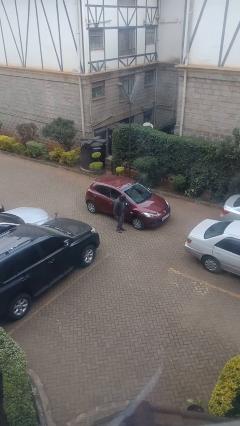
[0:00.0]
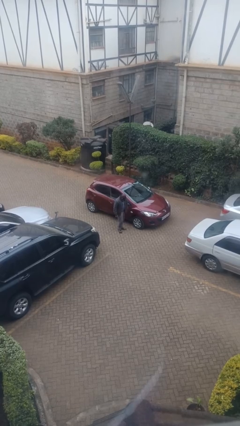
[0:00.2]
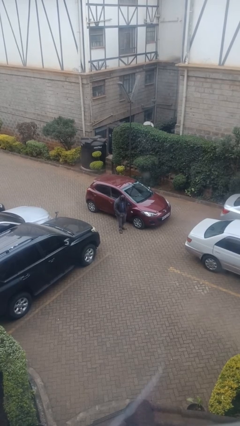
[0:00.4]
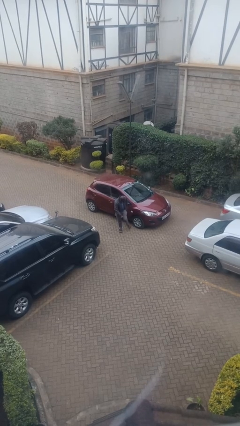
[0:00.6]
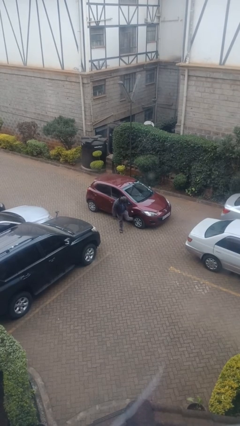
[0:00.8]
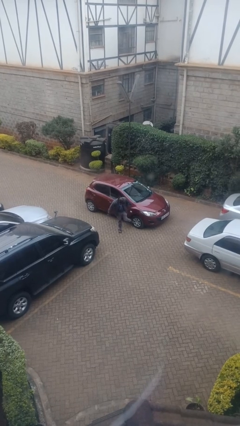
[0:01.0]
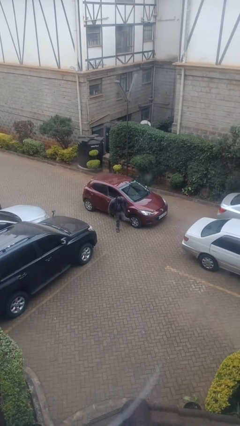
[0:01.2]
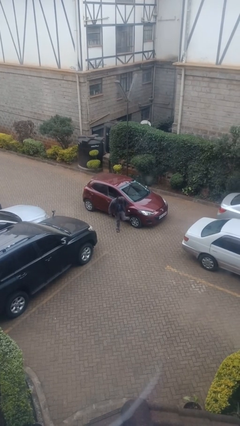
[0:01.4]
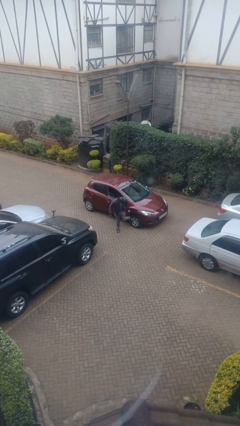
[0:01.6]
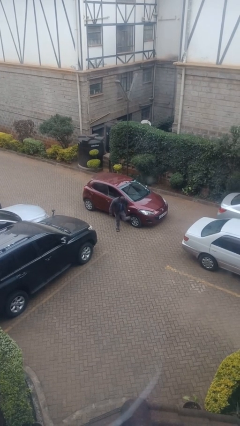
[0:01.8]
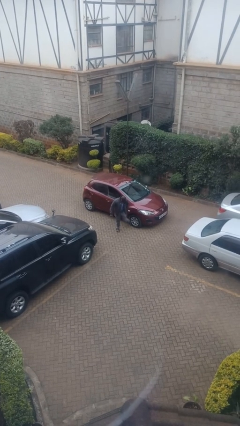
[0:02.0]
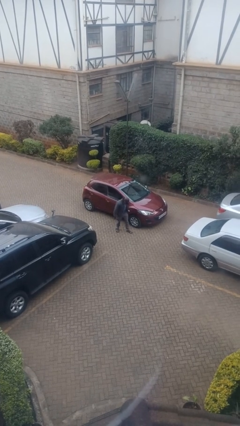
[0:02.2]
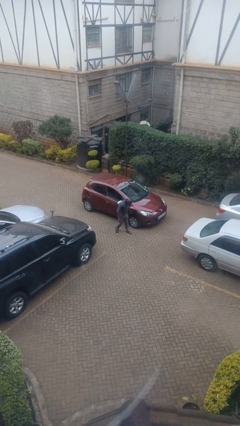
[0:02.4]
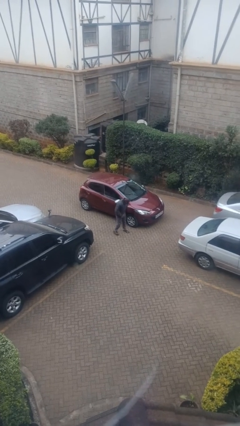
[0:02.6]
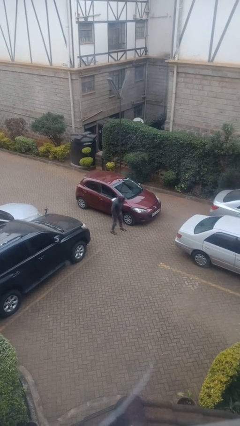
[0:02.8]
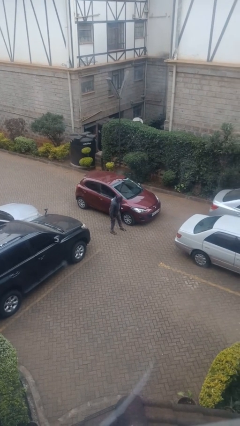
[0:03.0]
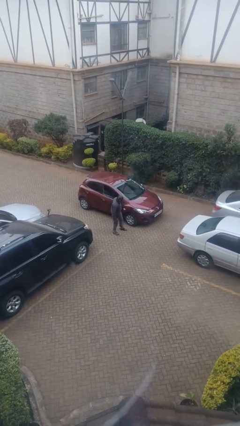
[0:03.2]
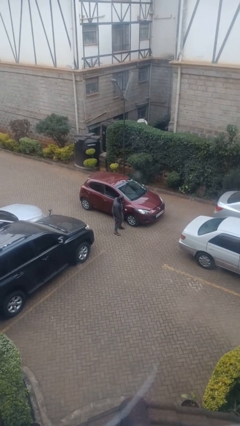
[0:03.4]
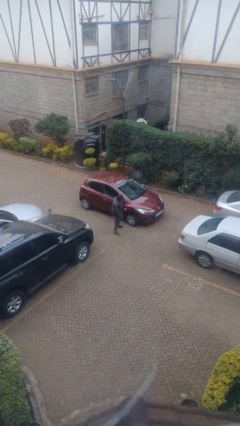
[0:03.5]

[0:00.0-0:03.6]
person kicks car tires

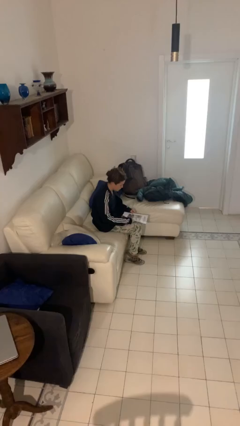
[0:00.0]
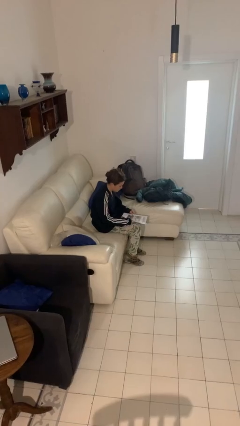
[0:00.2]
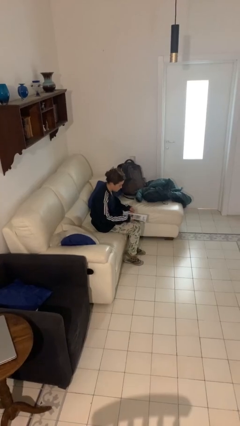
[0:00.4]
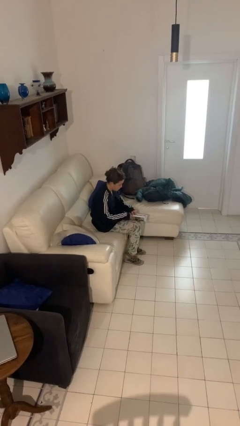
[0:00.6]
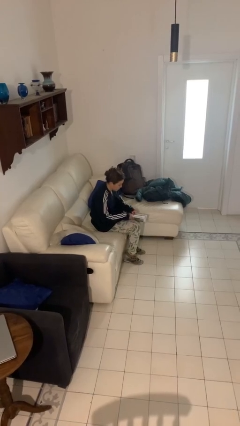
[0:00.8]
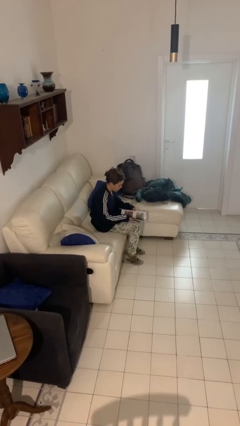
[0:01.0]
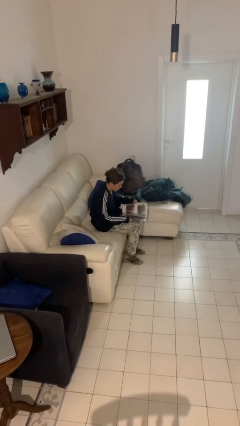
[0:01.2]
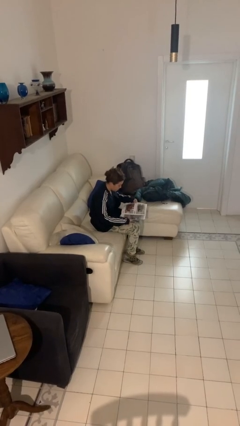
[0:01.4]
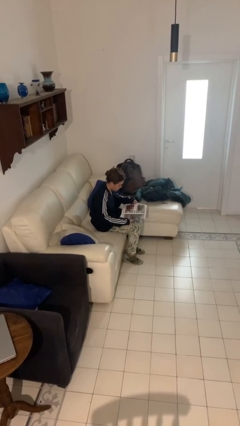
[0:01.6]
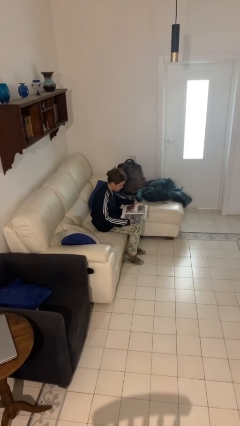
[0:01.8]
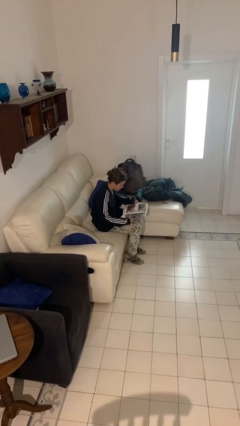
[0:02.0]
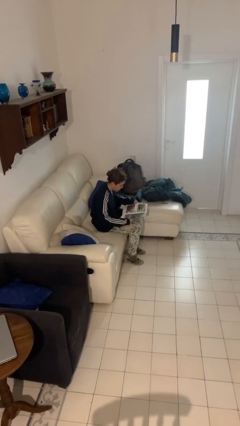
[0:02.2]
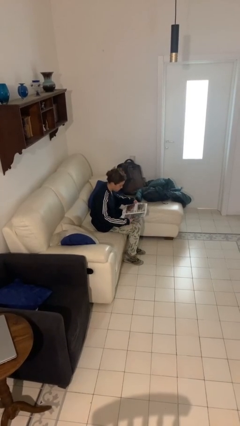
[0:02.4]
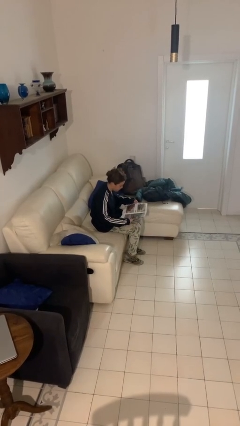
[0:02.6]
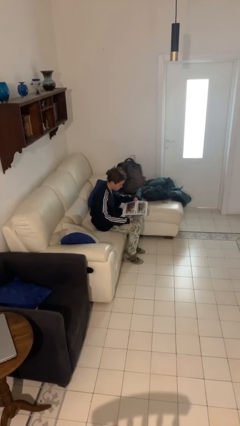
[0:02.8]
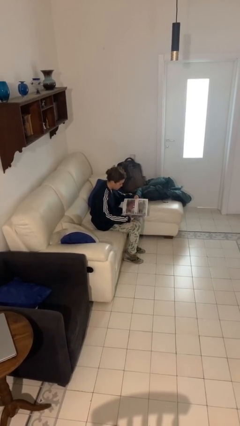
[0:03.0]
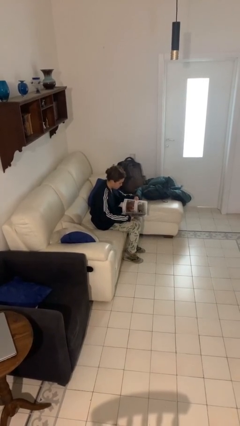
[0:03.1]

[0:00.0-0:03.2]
person reads magazine

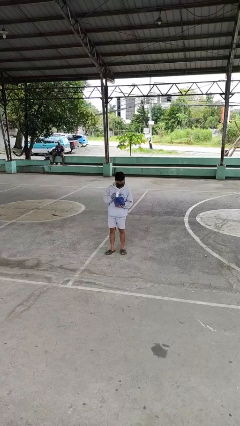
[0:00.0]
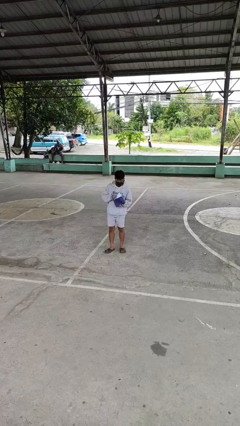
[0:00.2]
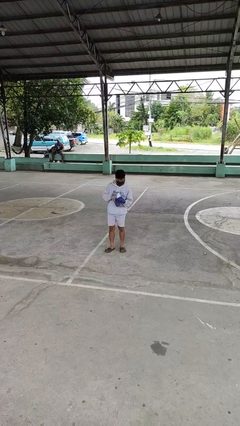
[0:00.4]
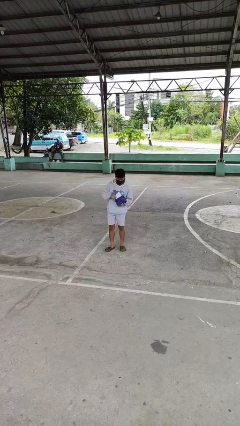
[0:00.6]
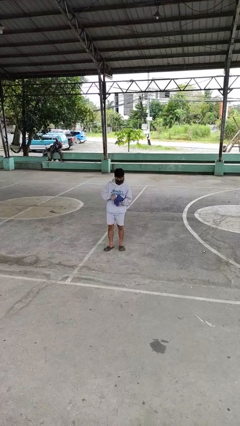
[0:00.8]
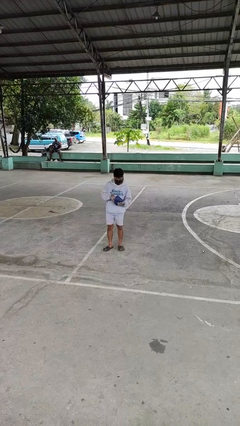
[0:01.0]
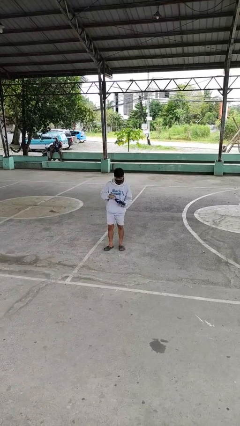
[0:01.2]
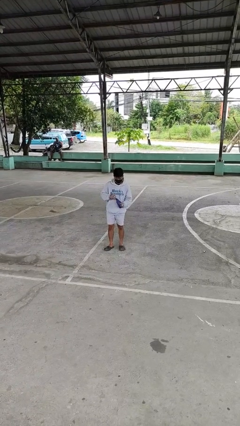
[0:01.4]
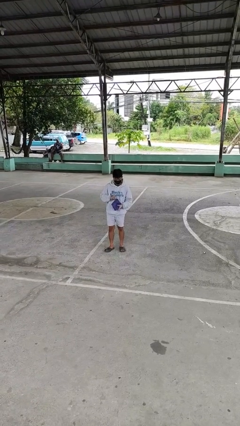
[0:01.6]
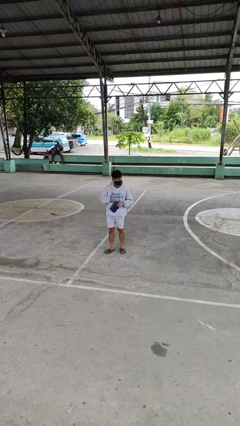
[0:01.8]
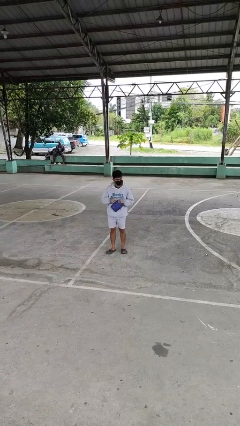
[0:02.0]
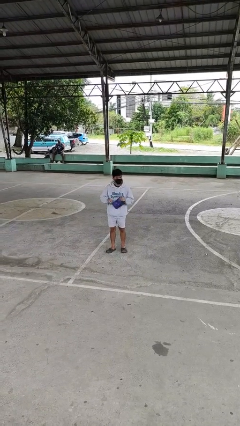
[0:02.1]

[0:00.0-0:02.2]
person puts object into purse

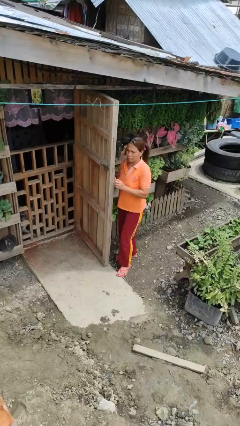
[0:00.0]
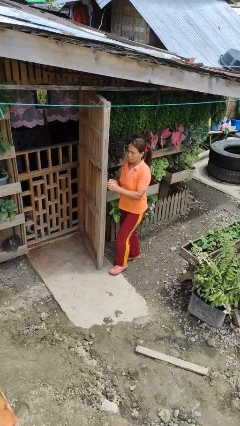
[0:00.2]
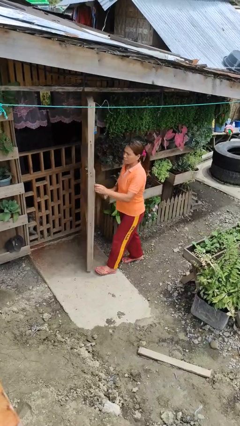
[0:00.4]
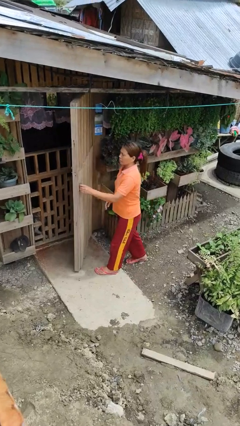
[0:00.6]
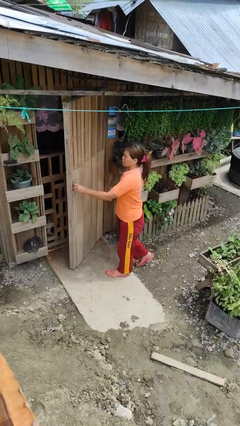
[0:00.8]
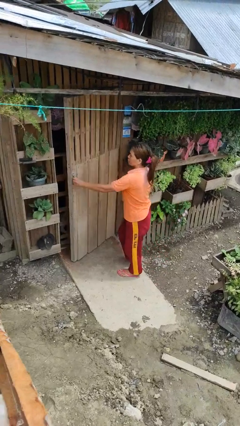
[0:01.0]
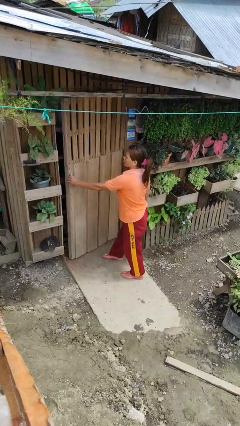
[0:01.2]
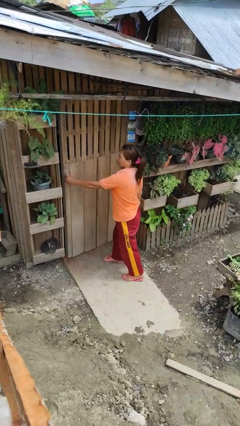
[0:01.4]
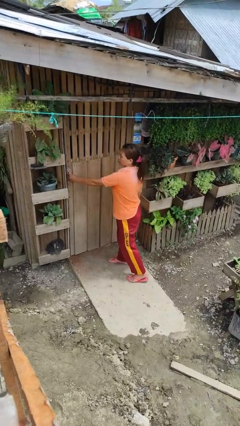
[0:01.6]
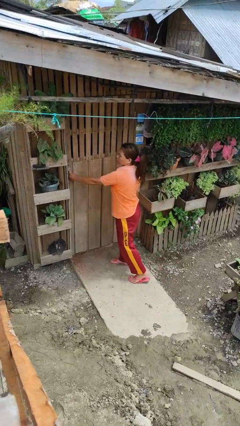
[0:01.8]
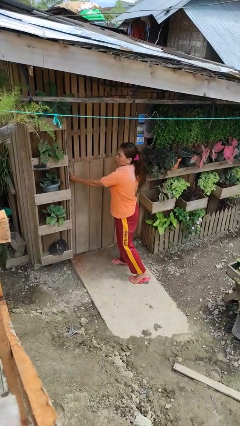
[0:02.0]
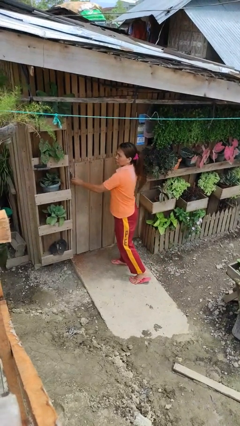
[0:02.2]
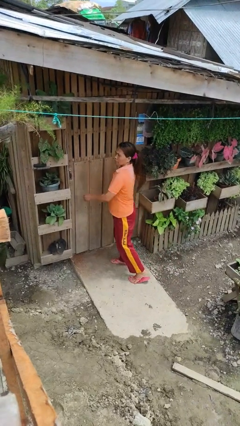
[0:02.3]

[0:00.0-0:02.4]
person closes facility door

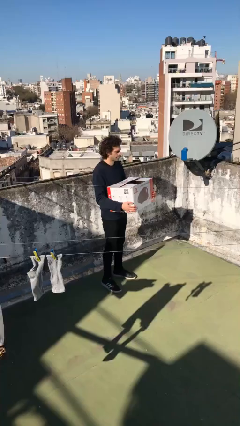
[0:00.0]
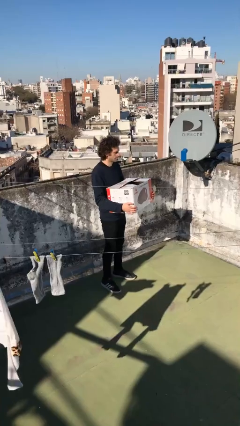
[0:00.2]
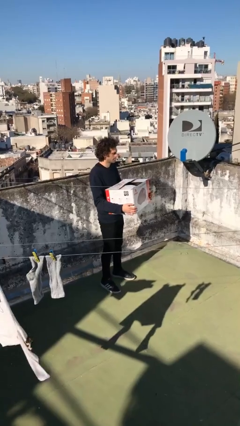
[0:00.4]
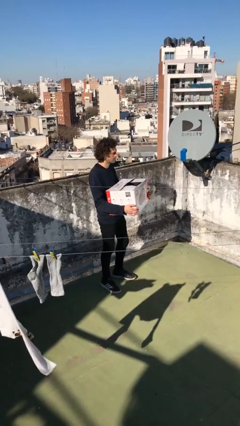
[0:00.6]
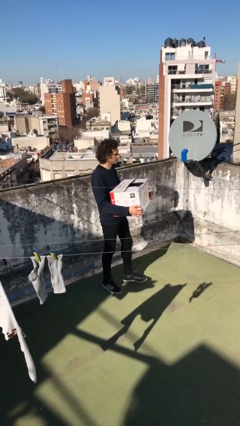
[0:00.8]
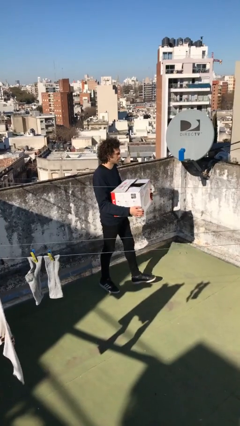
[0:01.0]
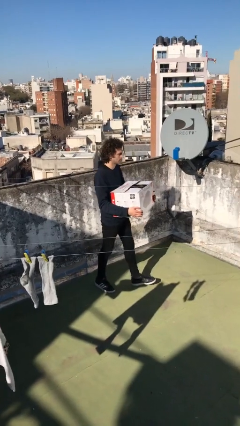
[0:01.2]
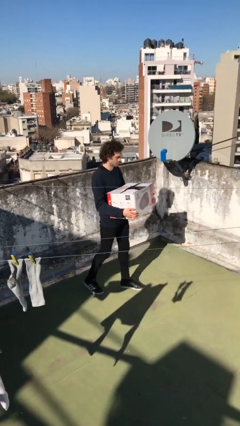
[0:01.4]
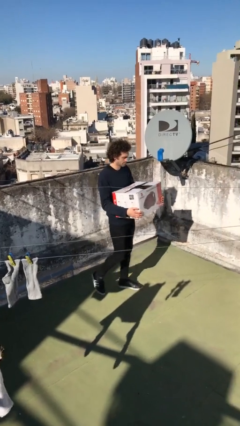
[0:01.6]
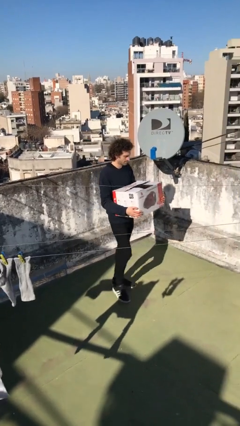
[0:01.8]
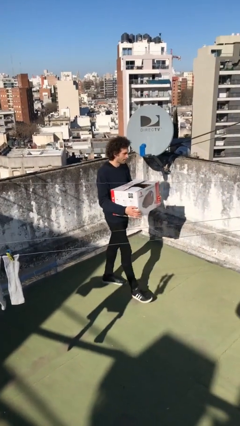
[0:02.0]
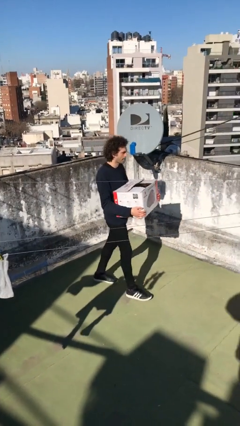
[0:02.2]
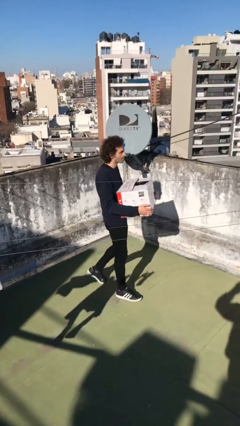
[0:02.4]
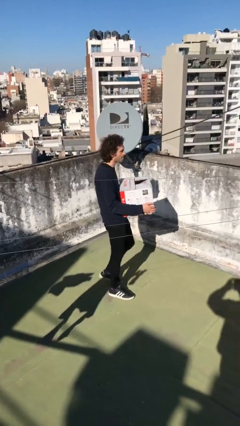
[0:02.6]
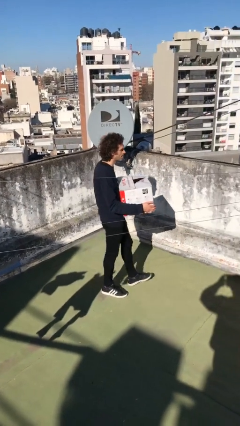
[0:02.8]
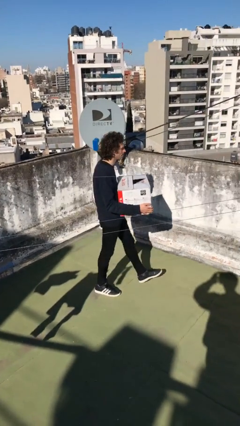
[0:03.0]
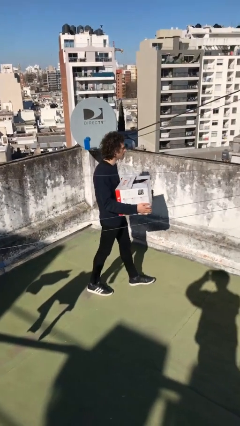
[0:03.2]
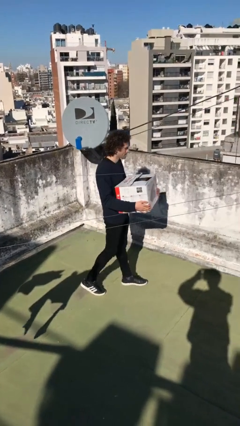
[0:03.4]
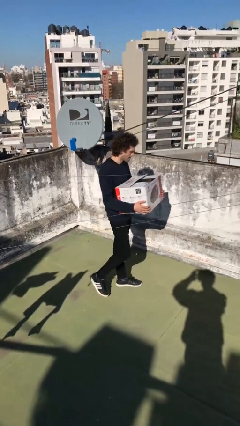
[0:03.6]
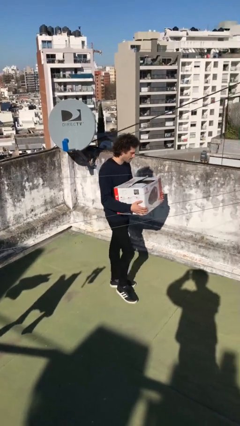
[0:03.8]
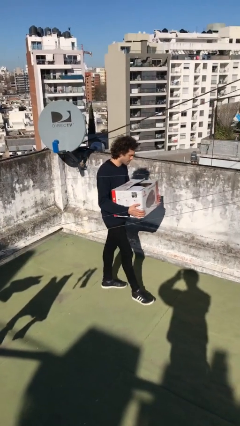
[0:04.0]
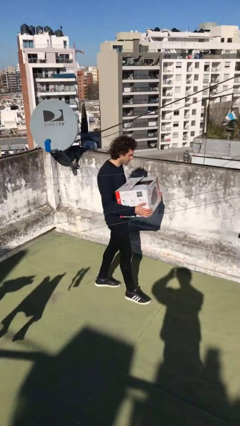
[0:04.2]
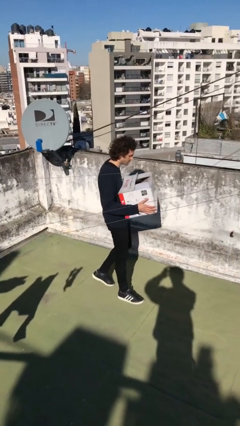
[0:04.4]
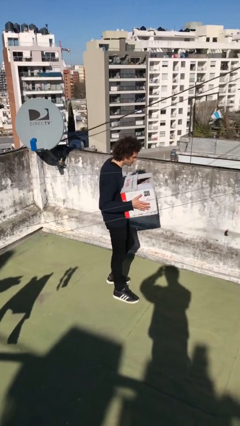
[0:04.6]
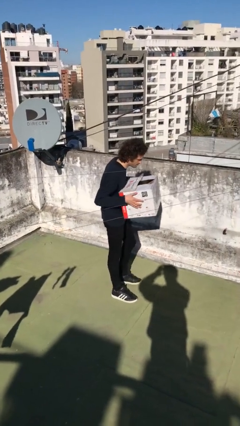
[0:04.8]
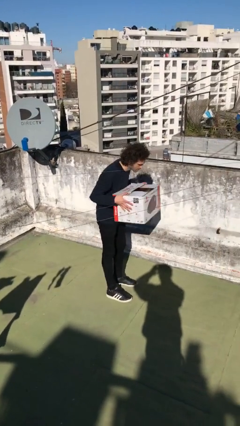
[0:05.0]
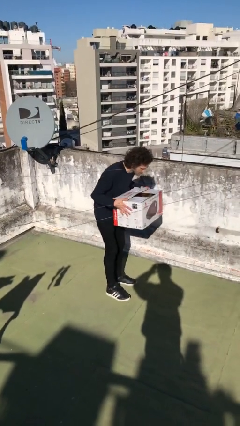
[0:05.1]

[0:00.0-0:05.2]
person carries heavy object

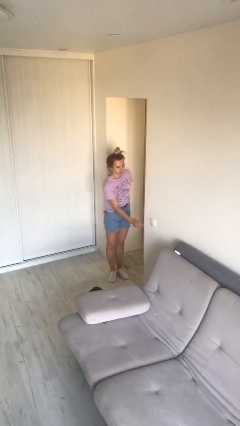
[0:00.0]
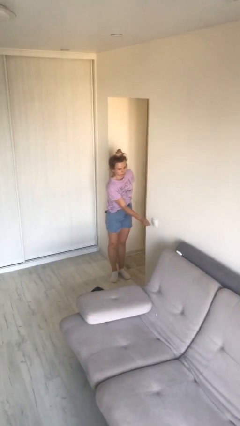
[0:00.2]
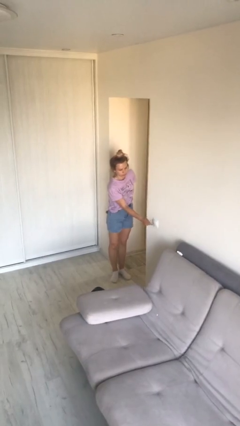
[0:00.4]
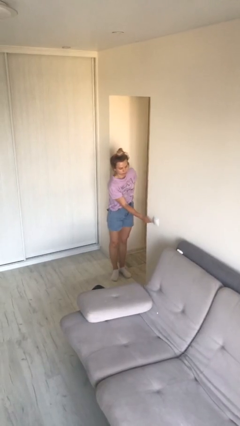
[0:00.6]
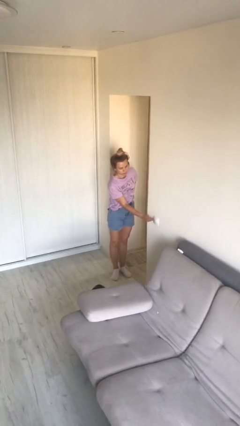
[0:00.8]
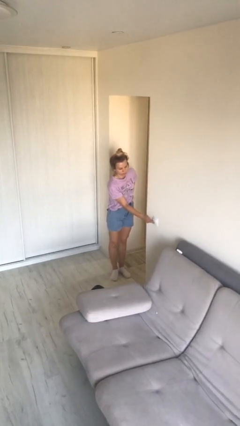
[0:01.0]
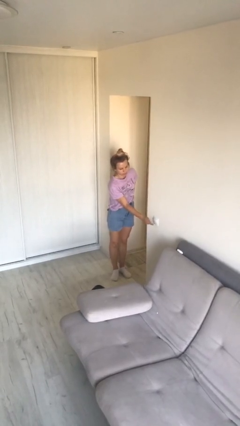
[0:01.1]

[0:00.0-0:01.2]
person taps object with finger
